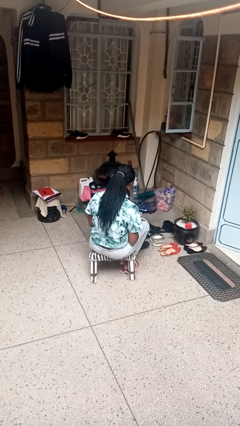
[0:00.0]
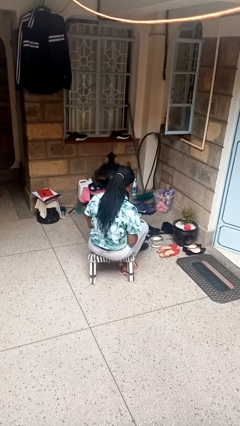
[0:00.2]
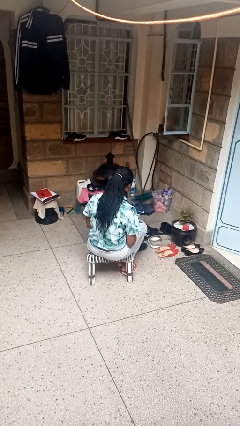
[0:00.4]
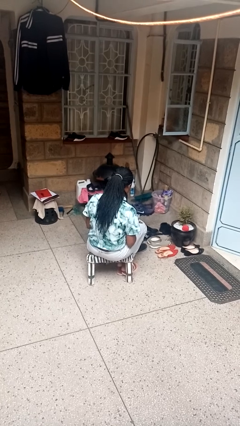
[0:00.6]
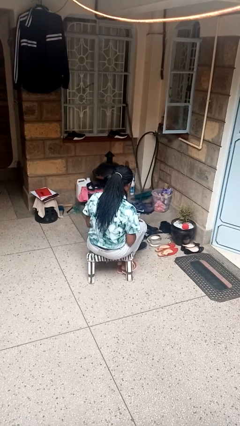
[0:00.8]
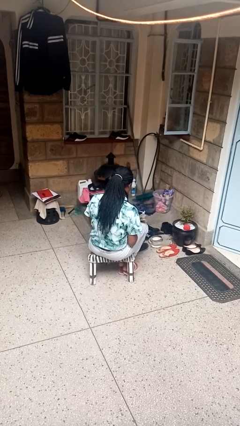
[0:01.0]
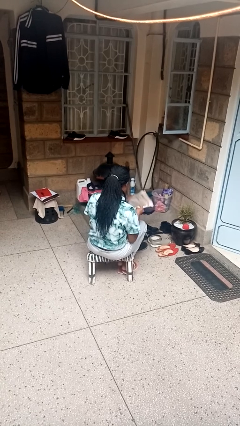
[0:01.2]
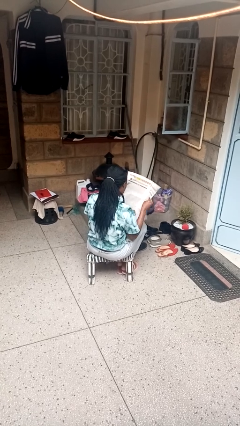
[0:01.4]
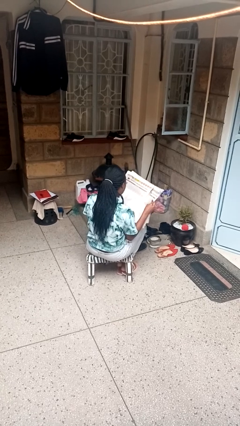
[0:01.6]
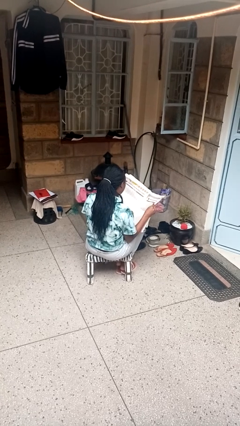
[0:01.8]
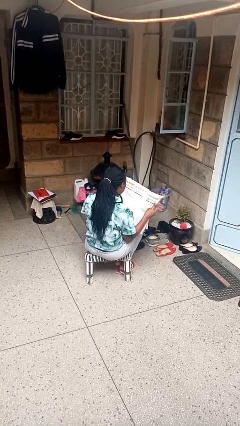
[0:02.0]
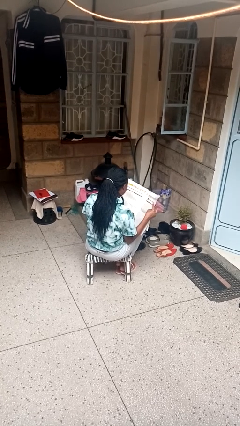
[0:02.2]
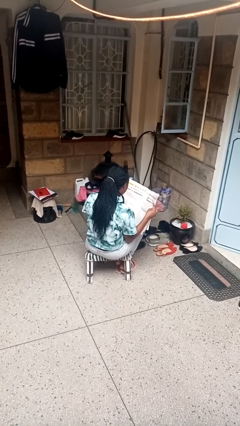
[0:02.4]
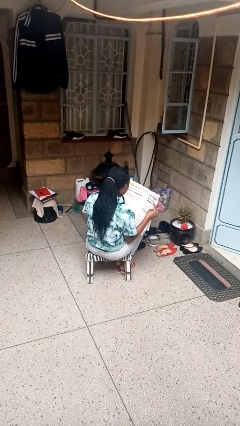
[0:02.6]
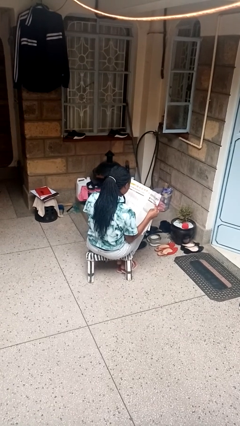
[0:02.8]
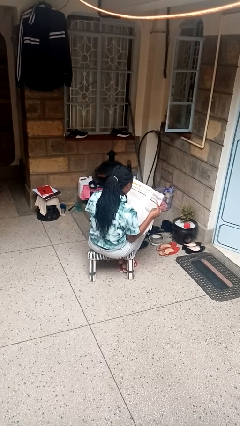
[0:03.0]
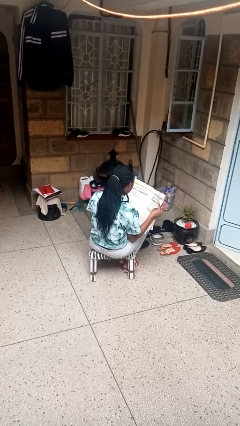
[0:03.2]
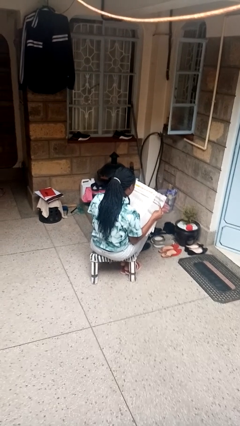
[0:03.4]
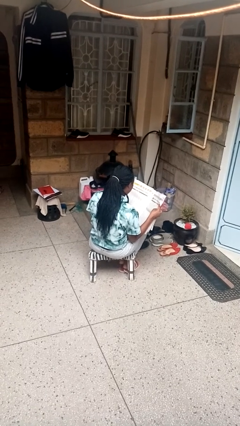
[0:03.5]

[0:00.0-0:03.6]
person reads newspaper

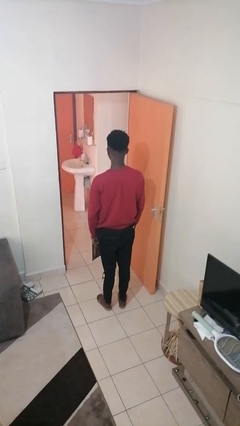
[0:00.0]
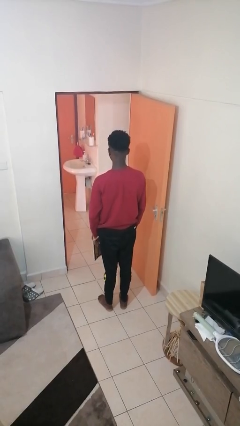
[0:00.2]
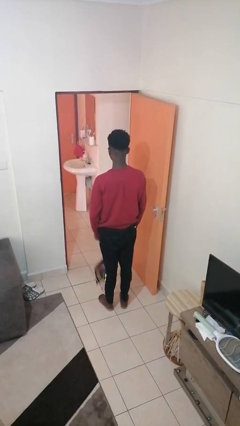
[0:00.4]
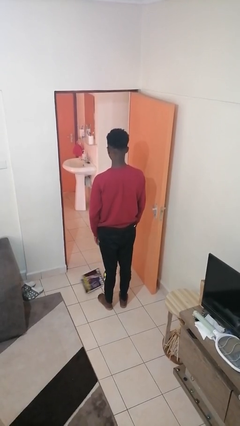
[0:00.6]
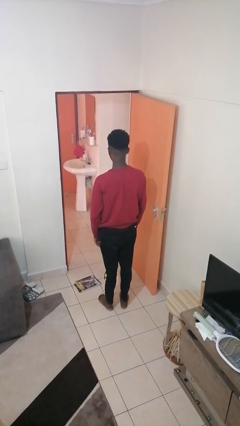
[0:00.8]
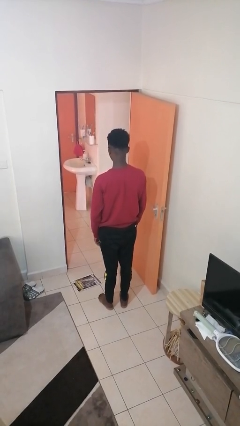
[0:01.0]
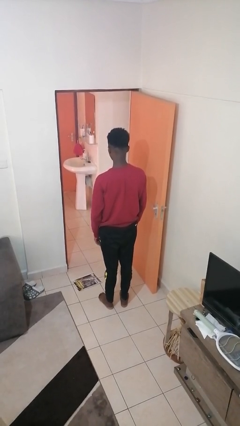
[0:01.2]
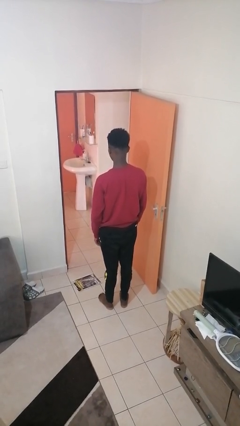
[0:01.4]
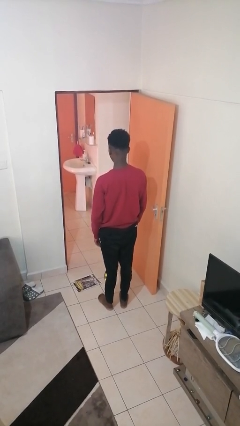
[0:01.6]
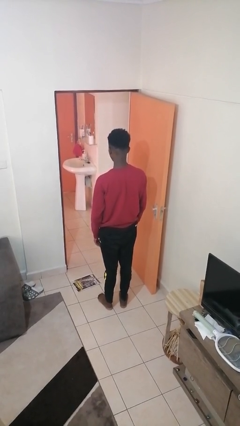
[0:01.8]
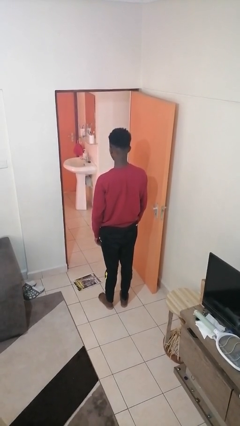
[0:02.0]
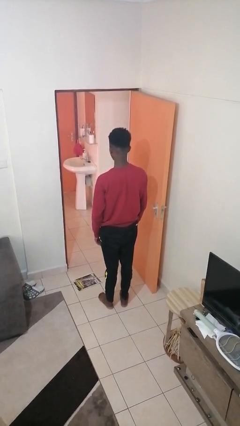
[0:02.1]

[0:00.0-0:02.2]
person drops object

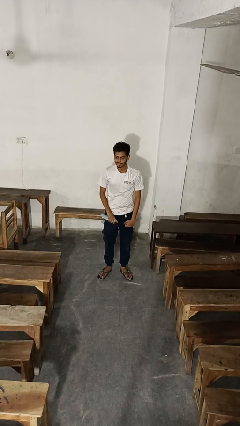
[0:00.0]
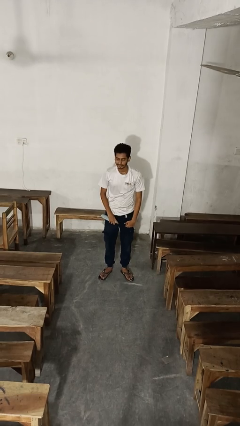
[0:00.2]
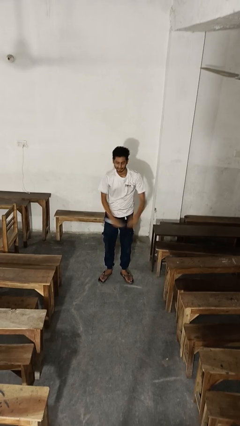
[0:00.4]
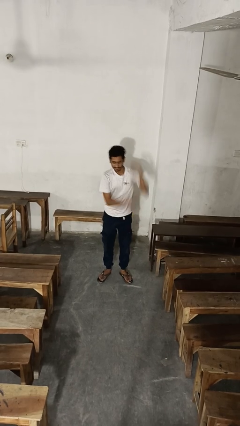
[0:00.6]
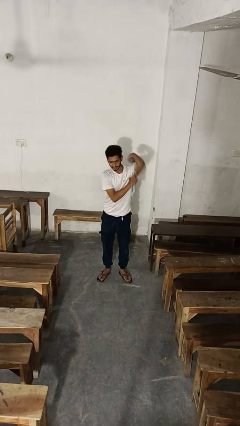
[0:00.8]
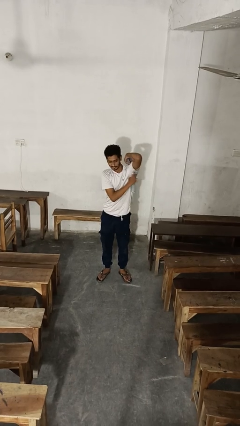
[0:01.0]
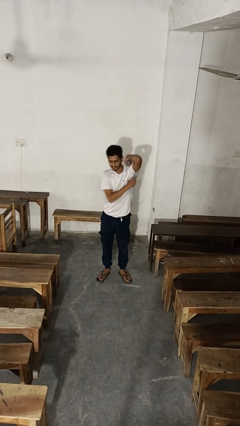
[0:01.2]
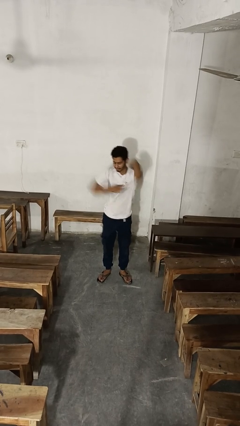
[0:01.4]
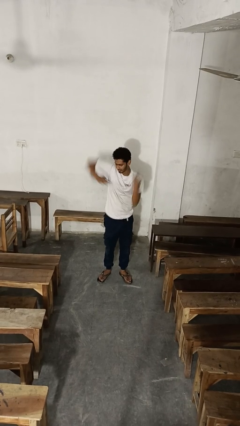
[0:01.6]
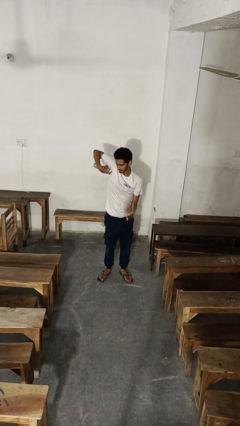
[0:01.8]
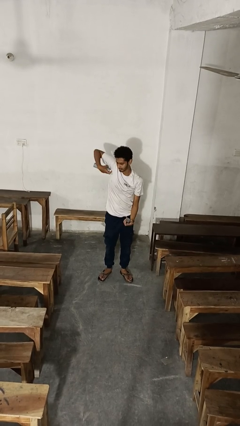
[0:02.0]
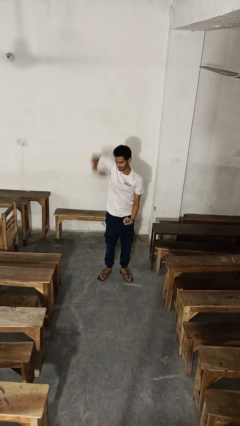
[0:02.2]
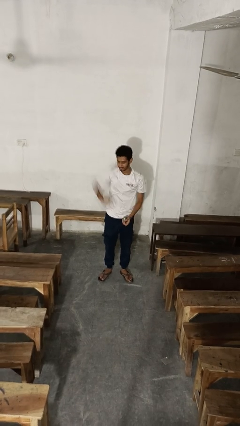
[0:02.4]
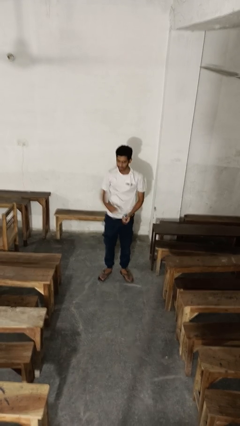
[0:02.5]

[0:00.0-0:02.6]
person applies deodorant

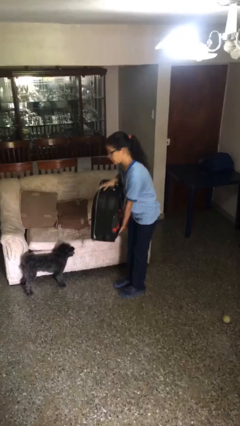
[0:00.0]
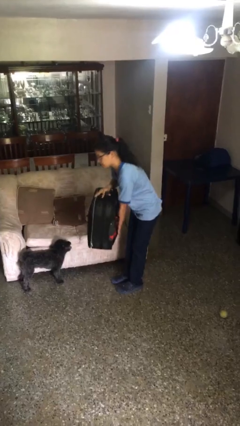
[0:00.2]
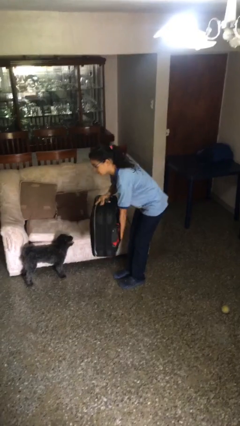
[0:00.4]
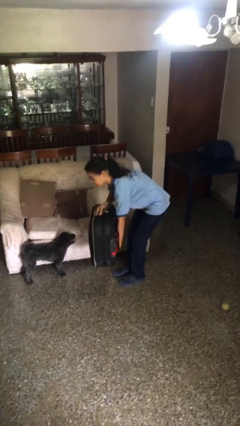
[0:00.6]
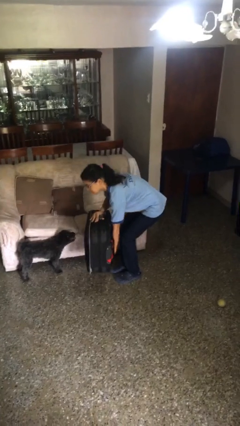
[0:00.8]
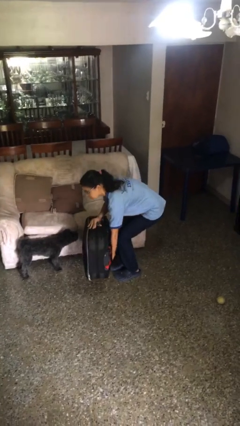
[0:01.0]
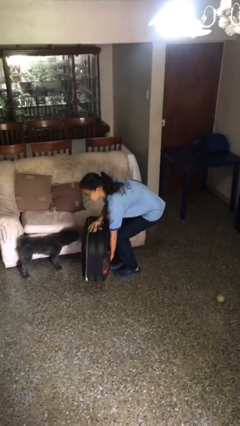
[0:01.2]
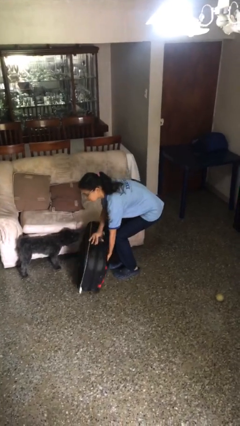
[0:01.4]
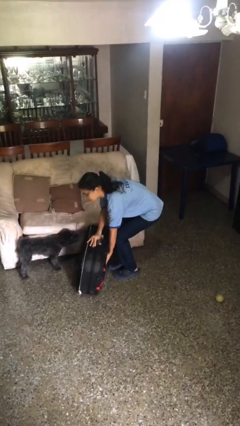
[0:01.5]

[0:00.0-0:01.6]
person puts down object on floor

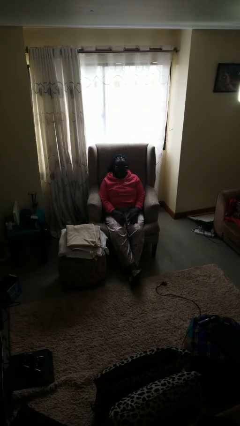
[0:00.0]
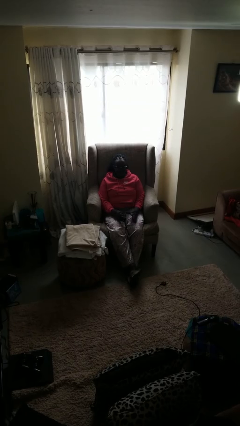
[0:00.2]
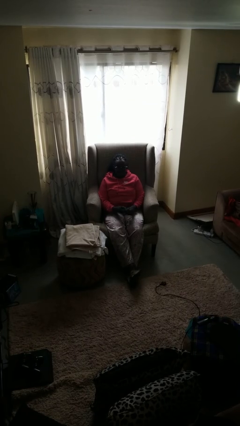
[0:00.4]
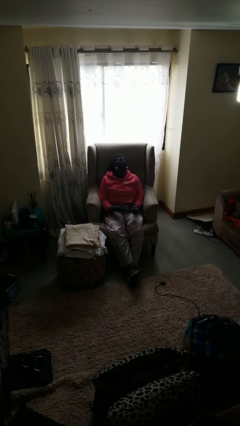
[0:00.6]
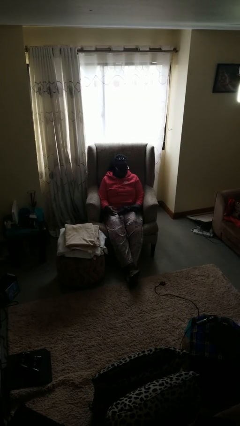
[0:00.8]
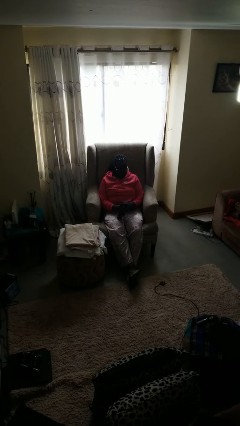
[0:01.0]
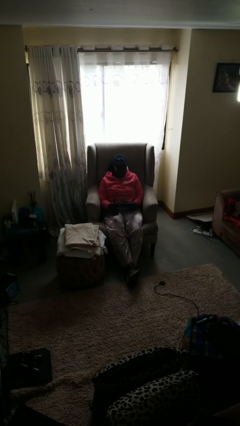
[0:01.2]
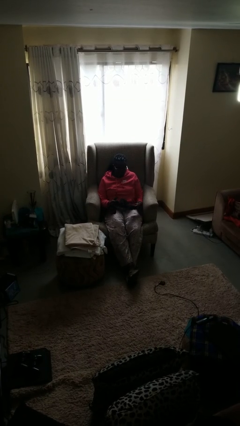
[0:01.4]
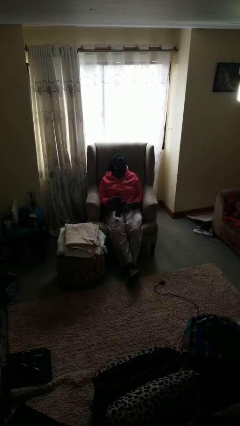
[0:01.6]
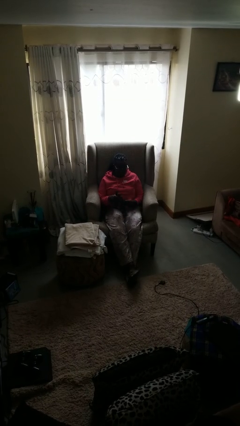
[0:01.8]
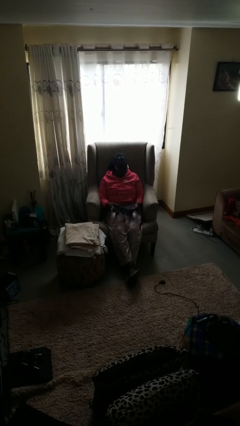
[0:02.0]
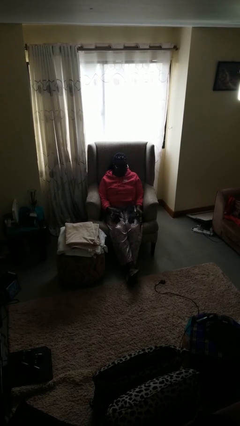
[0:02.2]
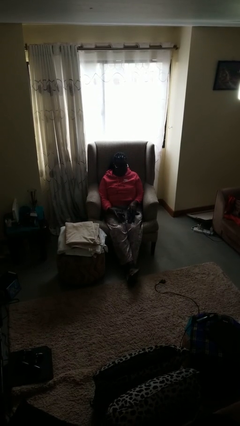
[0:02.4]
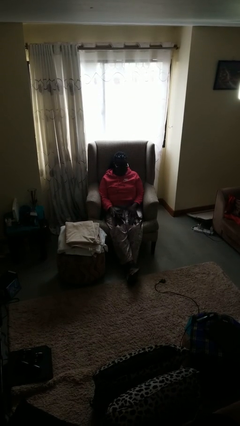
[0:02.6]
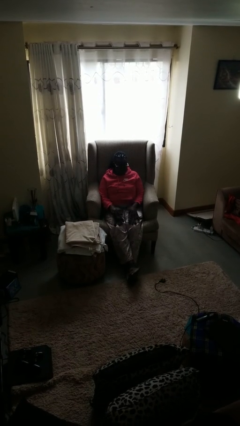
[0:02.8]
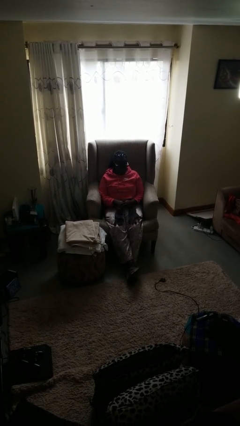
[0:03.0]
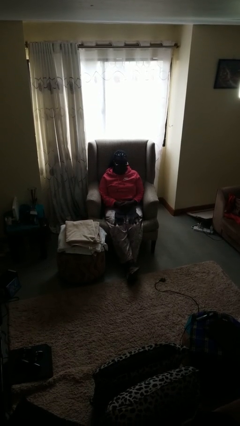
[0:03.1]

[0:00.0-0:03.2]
person takes off gloves

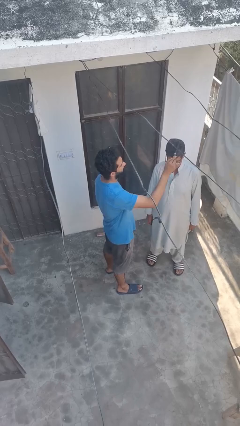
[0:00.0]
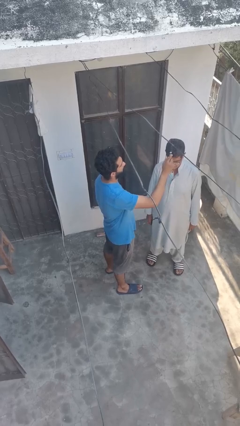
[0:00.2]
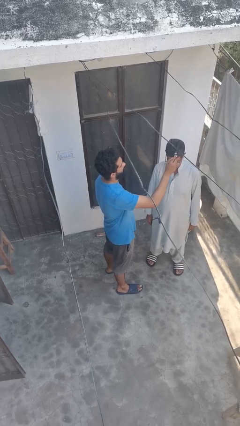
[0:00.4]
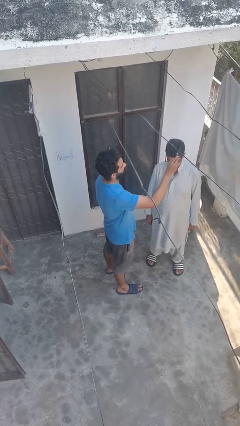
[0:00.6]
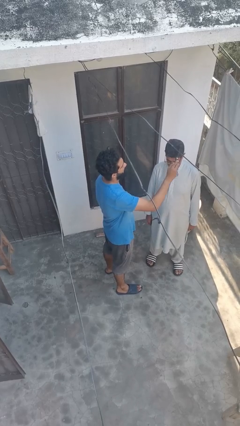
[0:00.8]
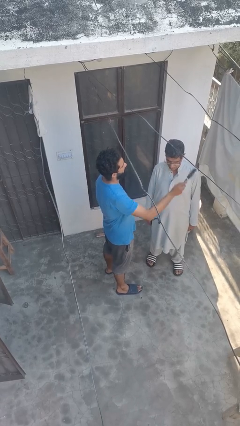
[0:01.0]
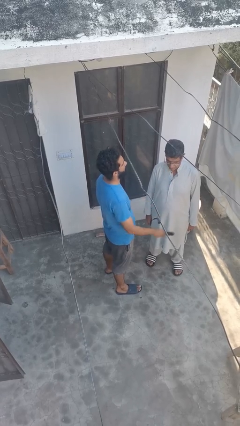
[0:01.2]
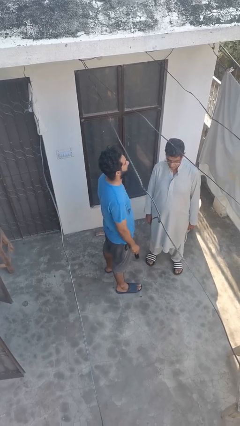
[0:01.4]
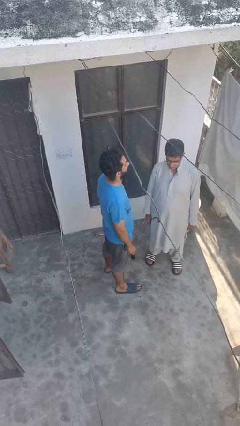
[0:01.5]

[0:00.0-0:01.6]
person brushes hair of person

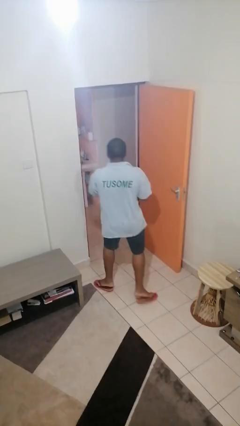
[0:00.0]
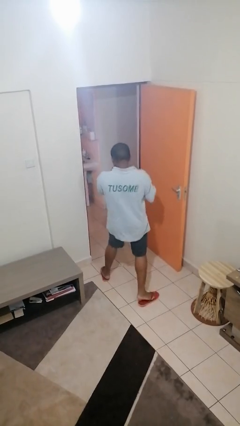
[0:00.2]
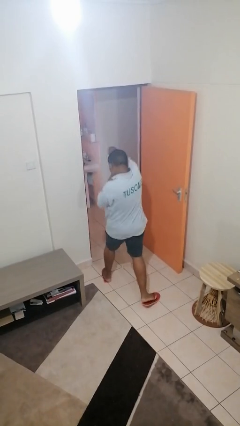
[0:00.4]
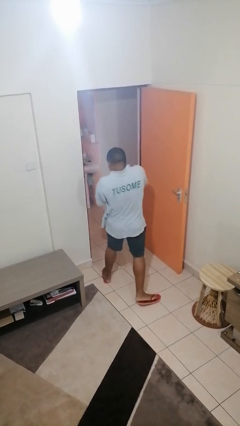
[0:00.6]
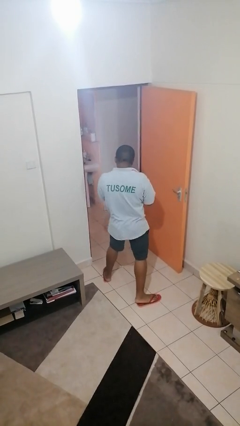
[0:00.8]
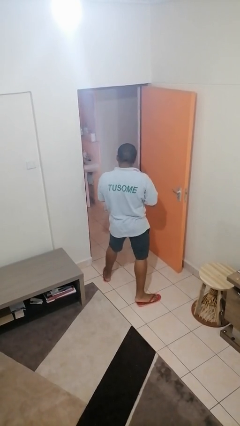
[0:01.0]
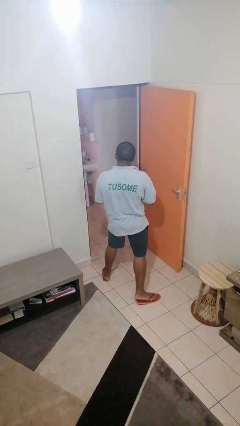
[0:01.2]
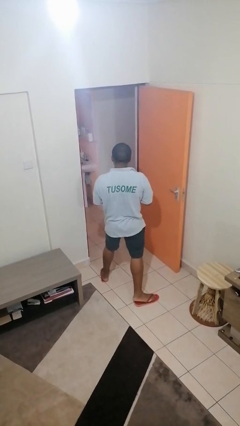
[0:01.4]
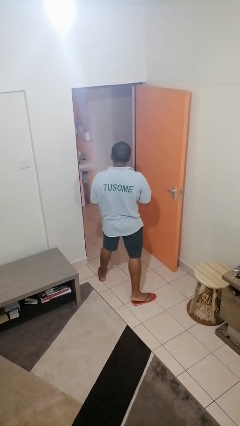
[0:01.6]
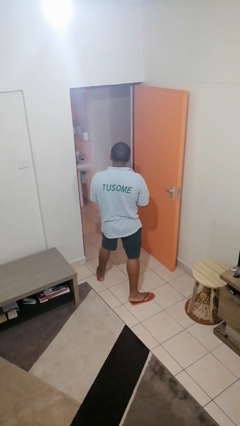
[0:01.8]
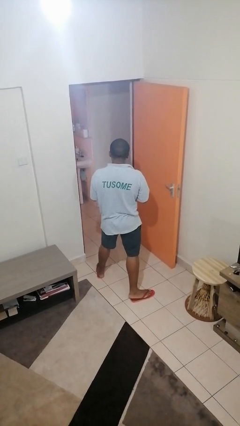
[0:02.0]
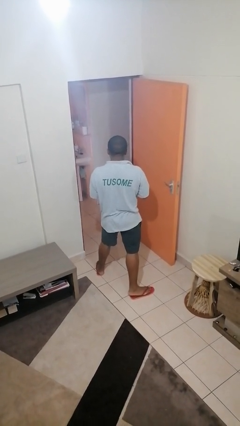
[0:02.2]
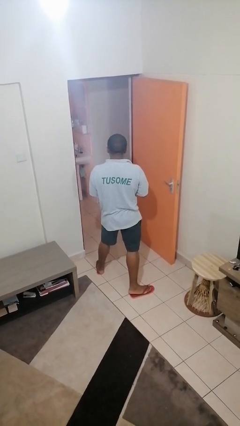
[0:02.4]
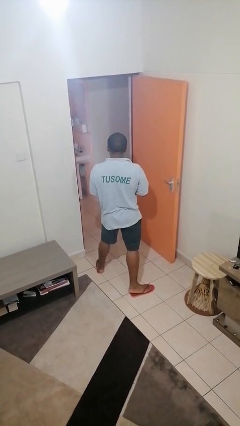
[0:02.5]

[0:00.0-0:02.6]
person punches

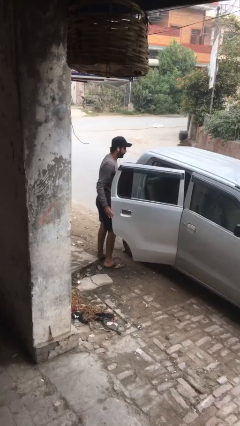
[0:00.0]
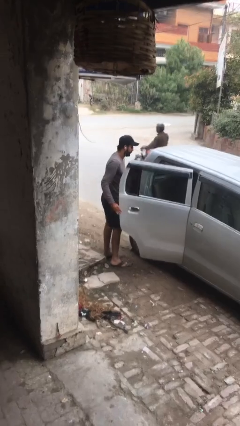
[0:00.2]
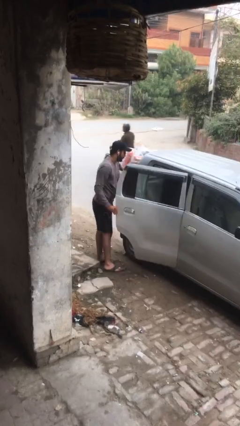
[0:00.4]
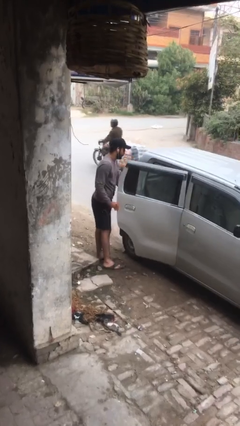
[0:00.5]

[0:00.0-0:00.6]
person closes car door